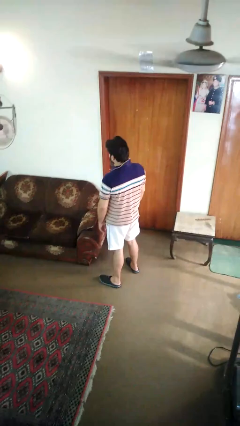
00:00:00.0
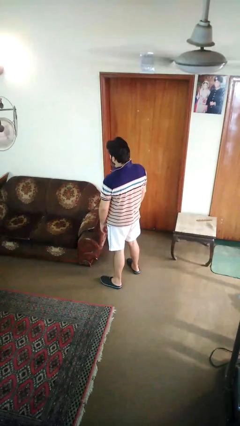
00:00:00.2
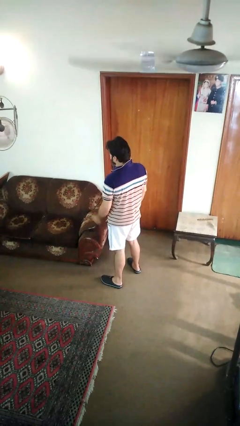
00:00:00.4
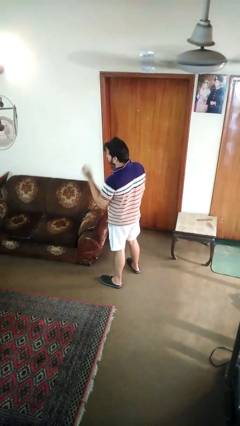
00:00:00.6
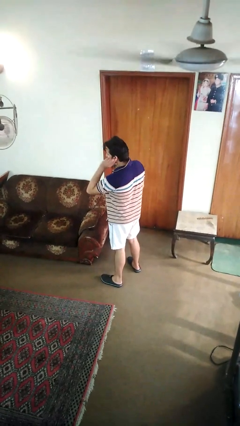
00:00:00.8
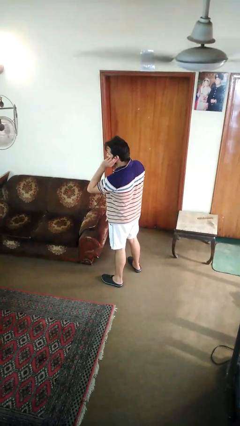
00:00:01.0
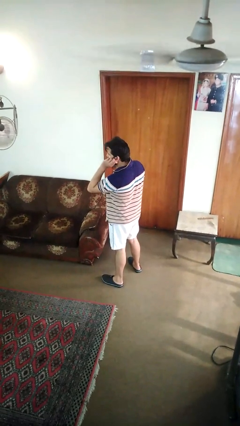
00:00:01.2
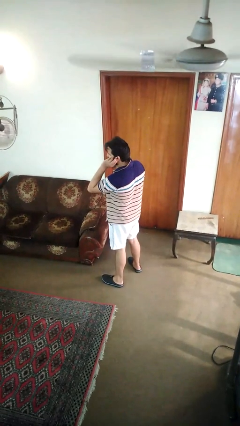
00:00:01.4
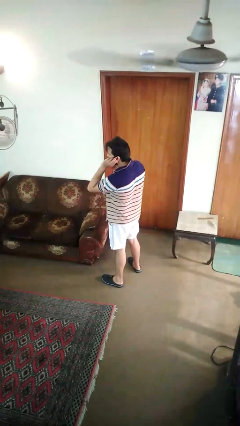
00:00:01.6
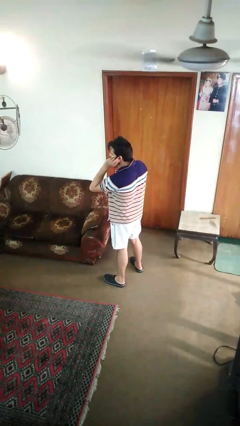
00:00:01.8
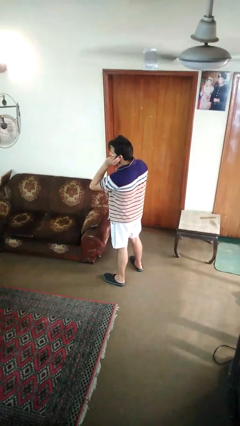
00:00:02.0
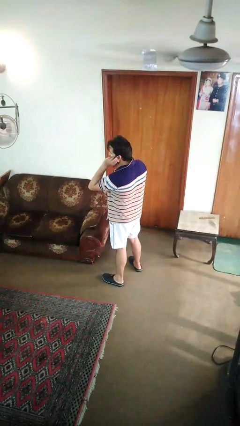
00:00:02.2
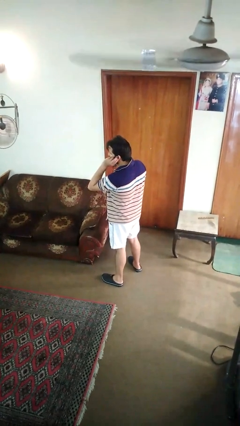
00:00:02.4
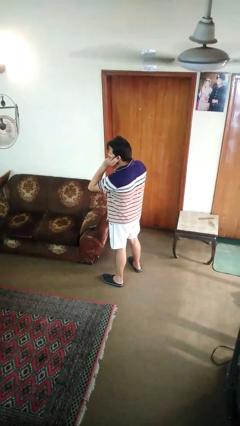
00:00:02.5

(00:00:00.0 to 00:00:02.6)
person touches earlobe

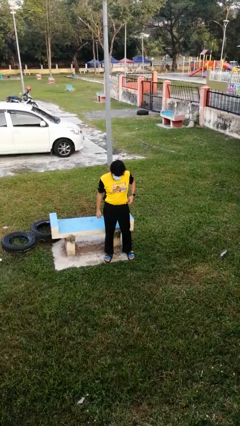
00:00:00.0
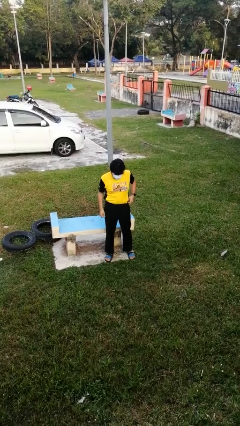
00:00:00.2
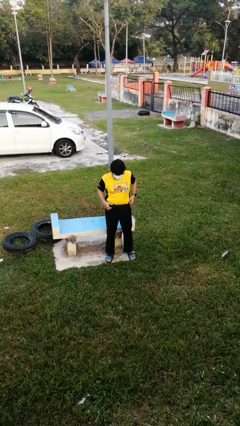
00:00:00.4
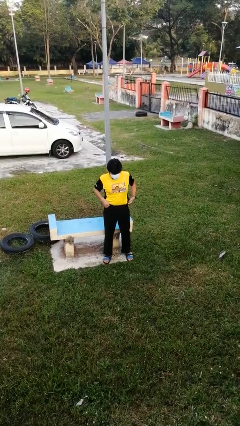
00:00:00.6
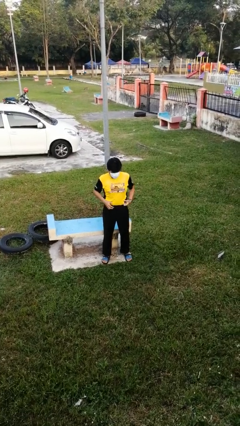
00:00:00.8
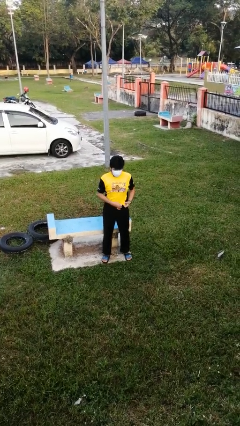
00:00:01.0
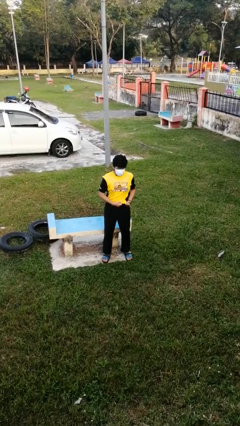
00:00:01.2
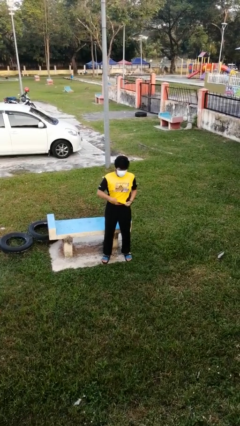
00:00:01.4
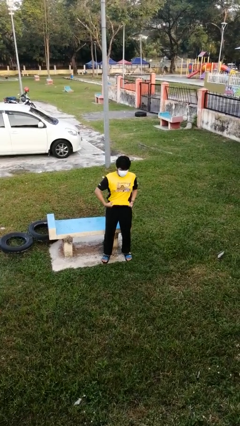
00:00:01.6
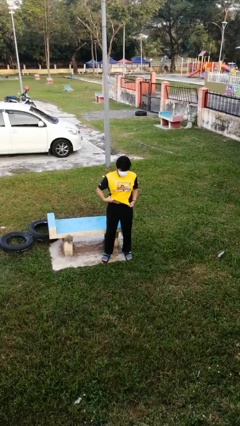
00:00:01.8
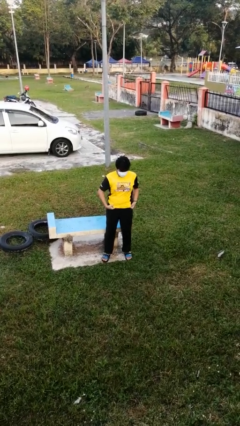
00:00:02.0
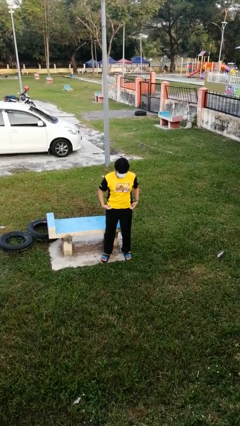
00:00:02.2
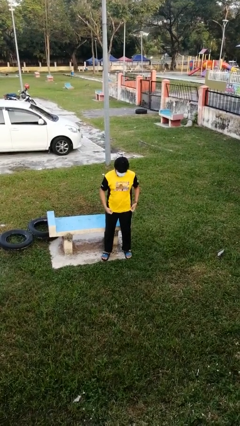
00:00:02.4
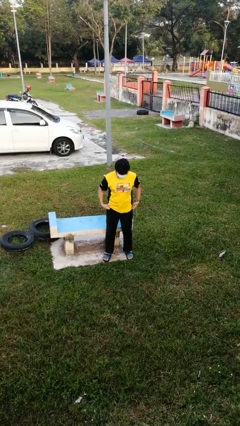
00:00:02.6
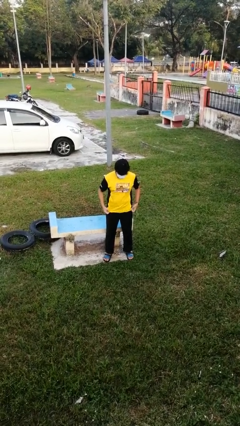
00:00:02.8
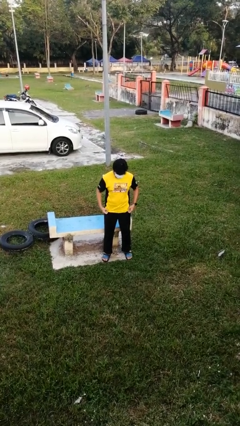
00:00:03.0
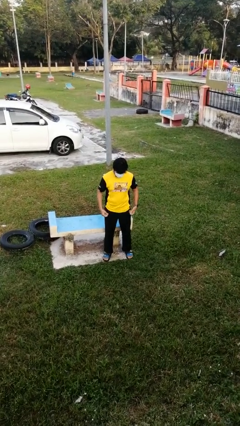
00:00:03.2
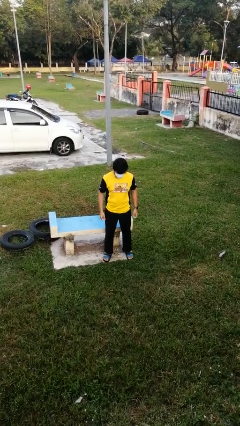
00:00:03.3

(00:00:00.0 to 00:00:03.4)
person untucks shirt

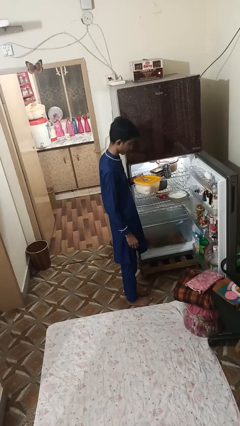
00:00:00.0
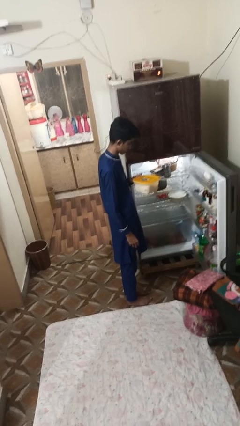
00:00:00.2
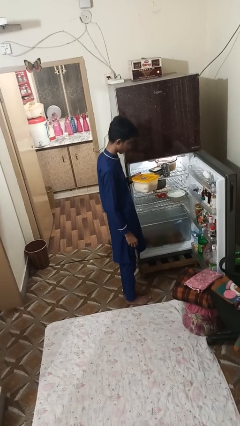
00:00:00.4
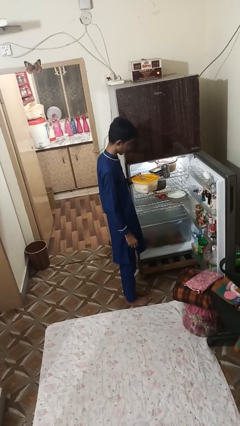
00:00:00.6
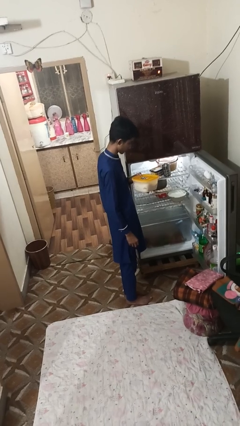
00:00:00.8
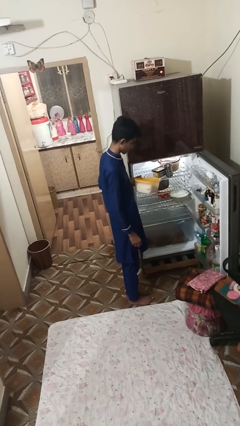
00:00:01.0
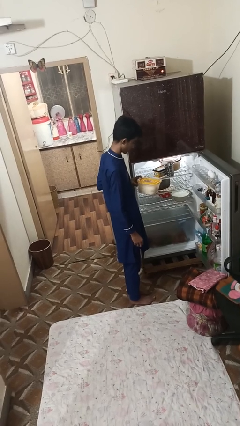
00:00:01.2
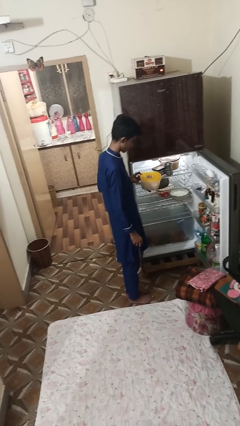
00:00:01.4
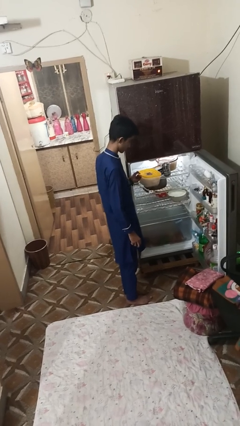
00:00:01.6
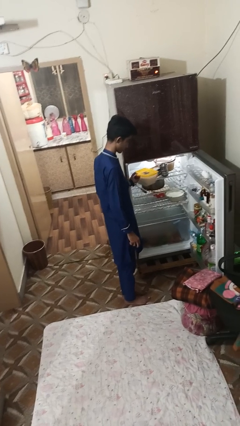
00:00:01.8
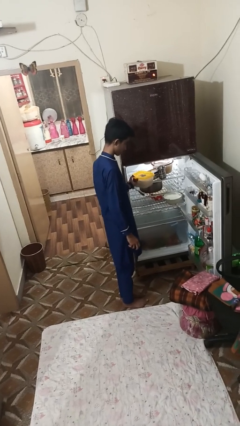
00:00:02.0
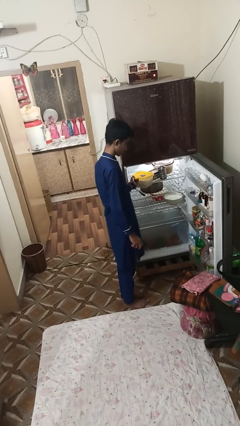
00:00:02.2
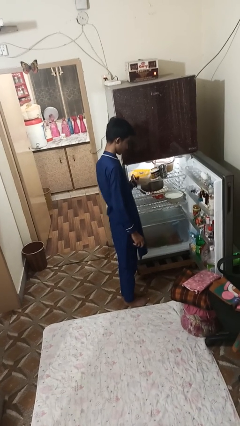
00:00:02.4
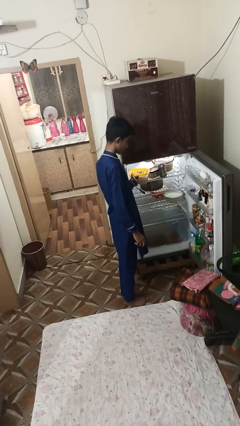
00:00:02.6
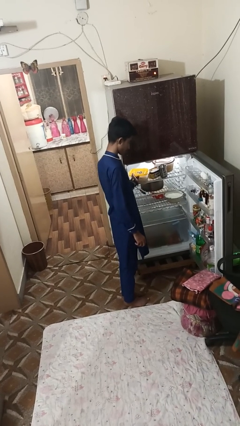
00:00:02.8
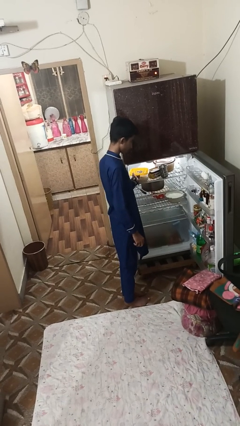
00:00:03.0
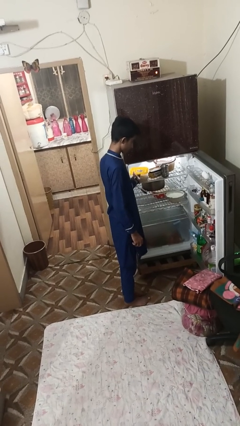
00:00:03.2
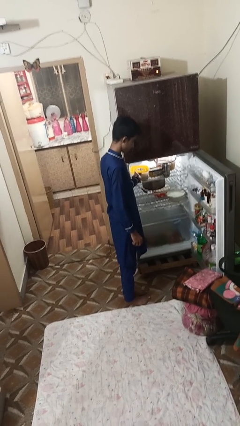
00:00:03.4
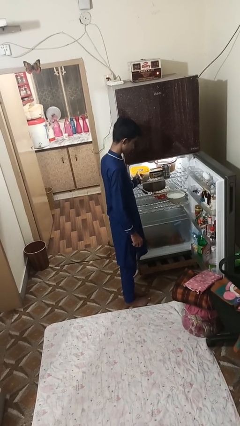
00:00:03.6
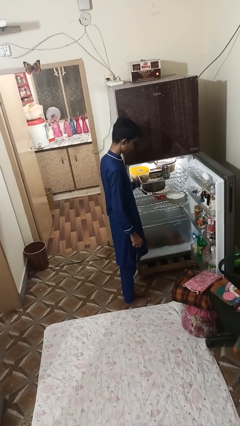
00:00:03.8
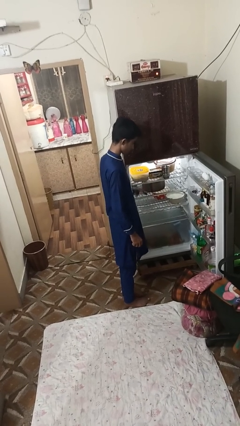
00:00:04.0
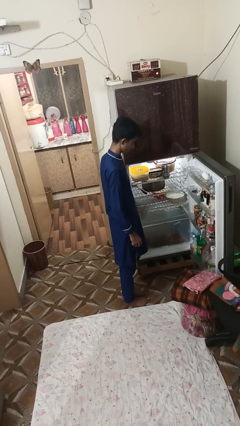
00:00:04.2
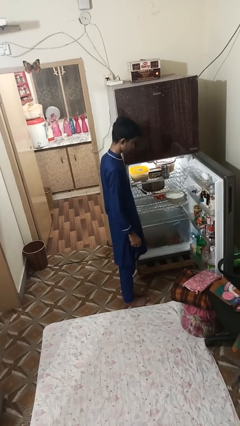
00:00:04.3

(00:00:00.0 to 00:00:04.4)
person puts object into refrigerator

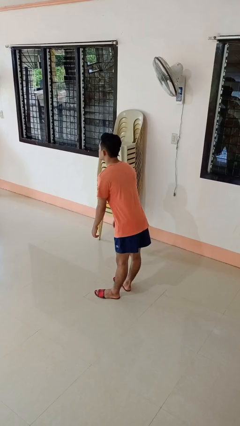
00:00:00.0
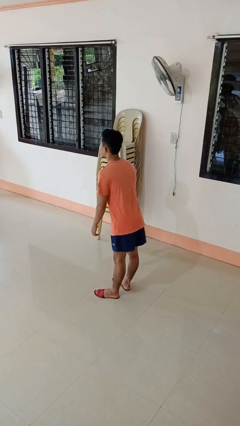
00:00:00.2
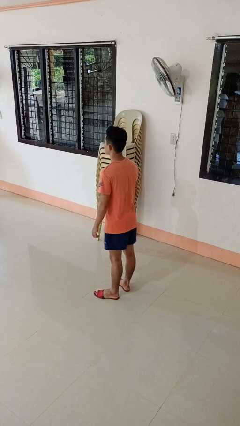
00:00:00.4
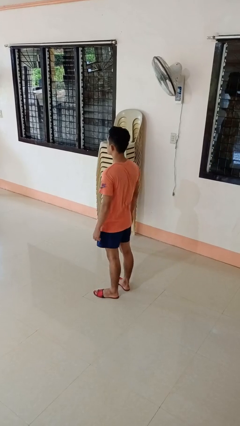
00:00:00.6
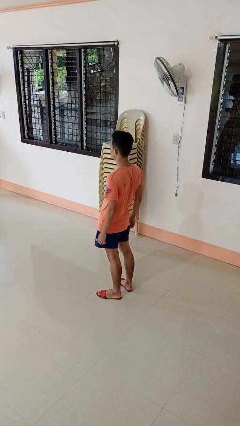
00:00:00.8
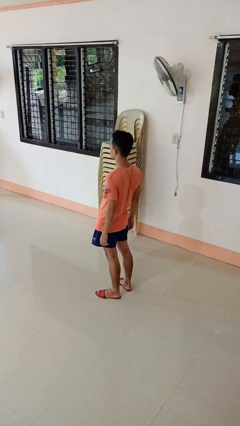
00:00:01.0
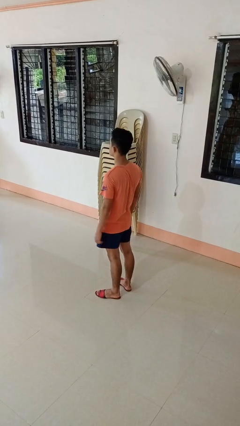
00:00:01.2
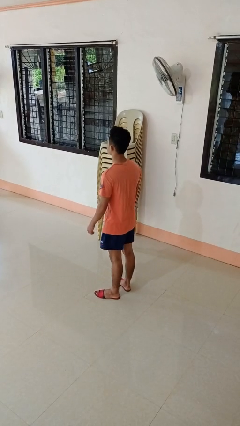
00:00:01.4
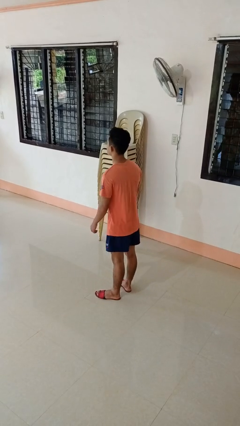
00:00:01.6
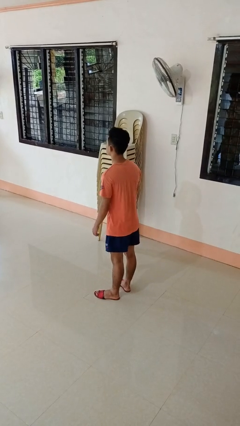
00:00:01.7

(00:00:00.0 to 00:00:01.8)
person wiggles hips

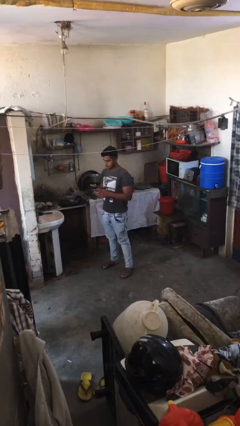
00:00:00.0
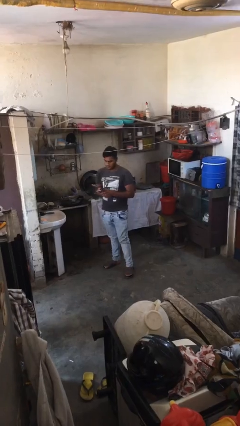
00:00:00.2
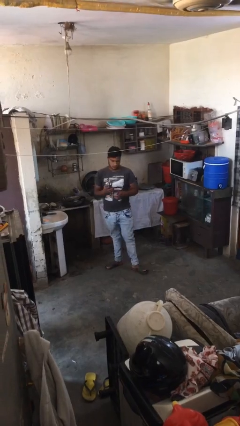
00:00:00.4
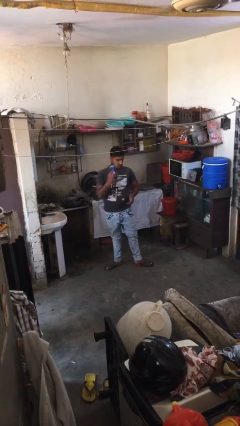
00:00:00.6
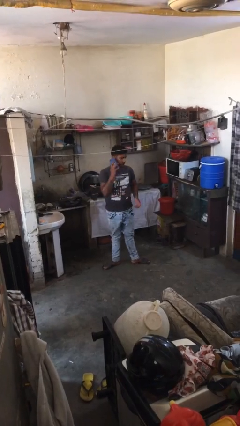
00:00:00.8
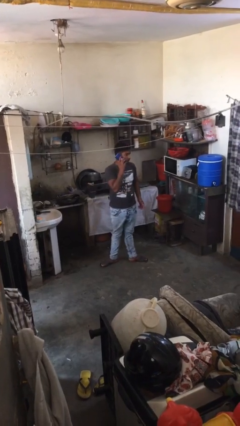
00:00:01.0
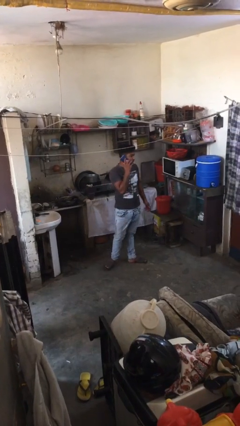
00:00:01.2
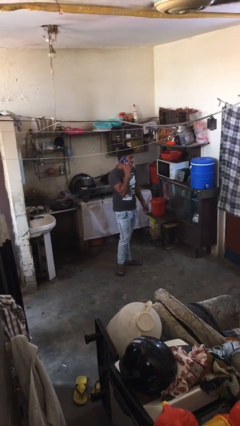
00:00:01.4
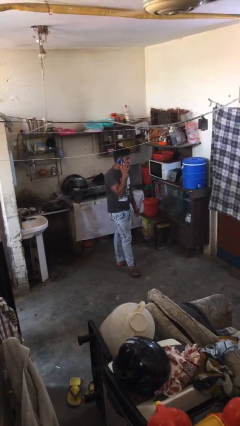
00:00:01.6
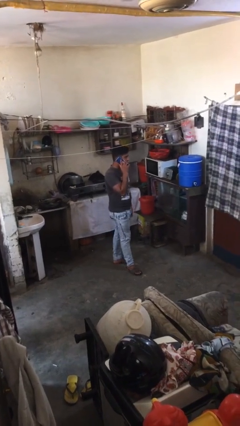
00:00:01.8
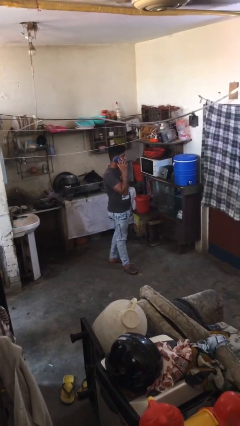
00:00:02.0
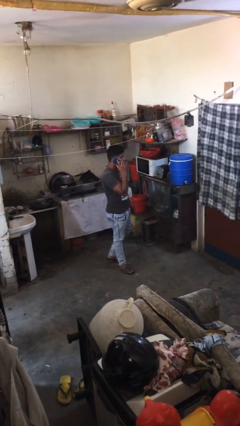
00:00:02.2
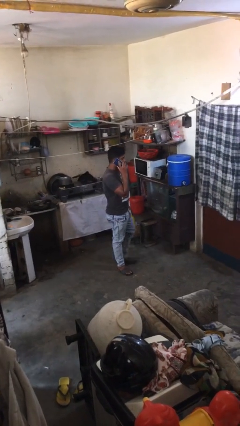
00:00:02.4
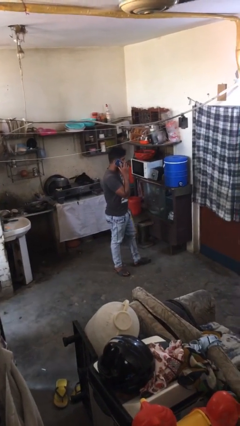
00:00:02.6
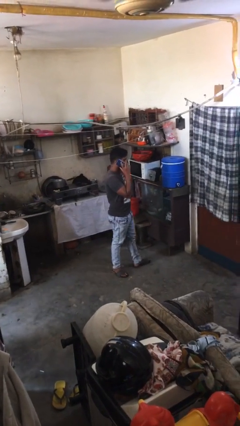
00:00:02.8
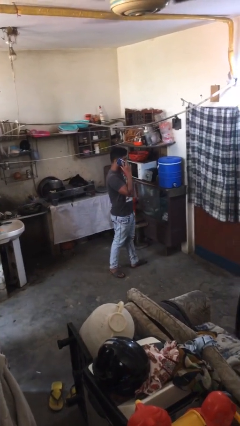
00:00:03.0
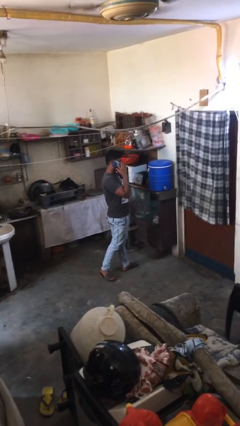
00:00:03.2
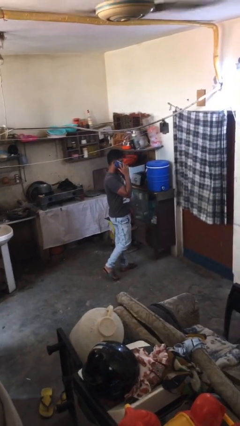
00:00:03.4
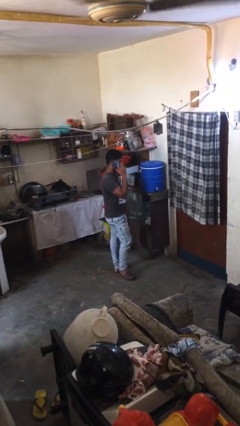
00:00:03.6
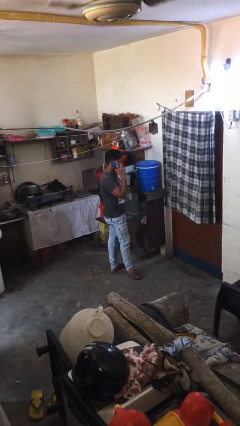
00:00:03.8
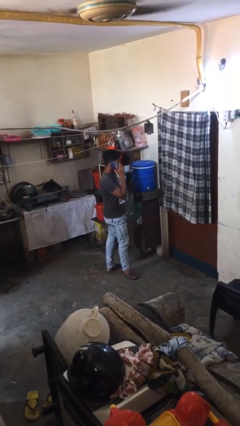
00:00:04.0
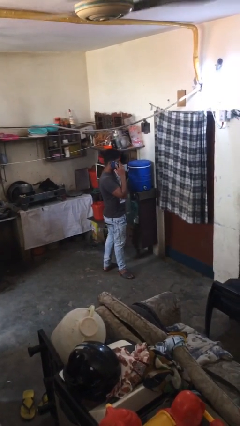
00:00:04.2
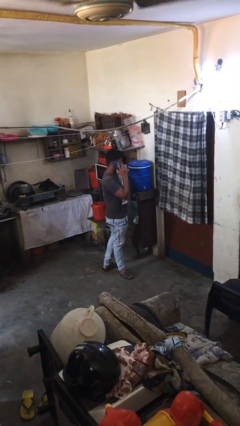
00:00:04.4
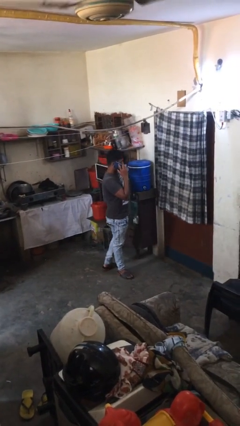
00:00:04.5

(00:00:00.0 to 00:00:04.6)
person talks on phone

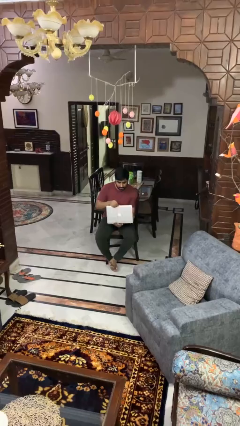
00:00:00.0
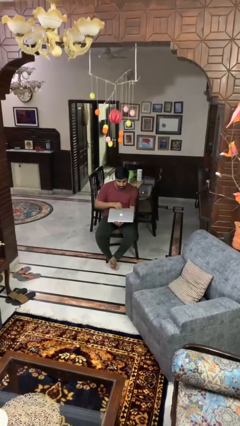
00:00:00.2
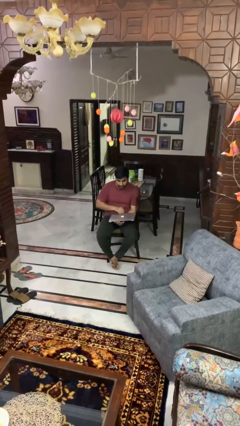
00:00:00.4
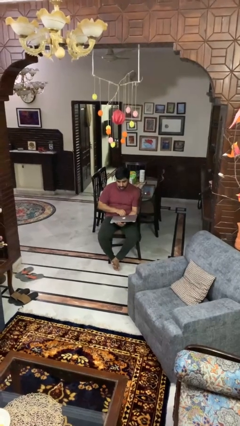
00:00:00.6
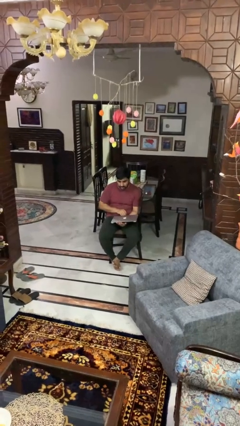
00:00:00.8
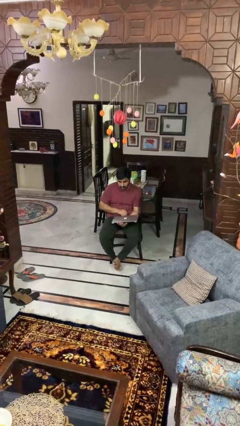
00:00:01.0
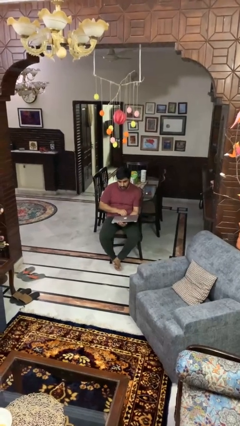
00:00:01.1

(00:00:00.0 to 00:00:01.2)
person closes laptop
